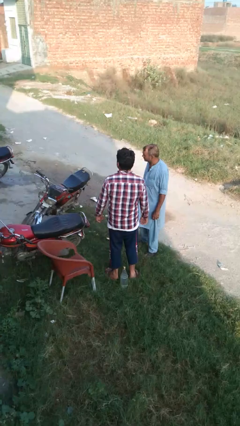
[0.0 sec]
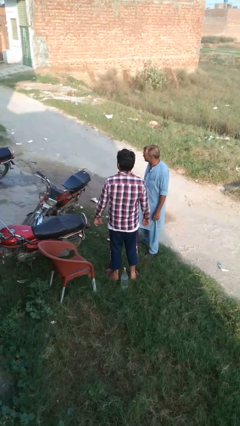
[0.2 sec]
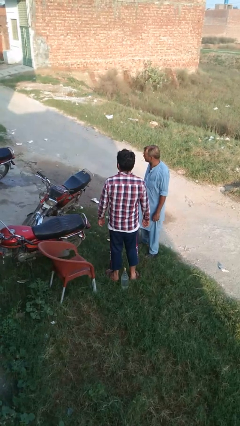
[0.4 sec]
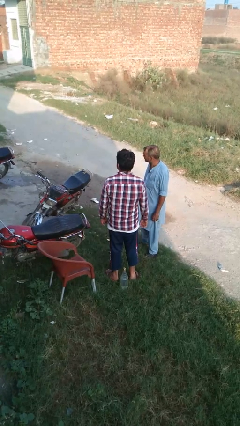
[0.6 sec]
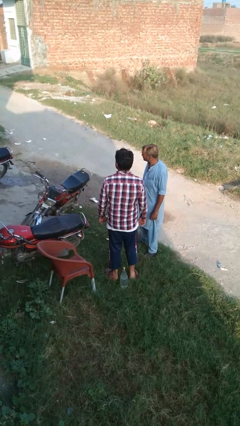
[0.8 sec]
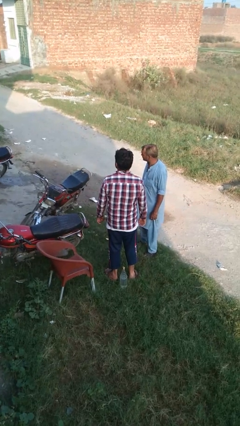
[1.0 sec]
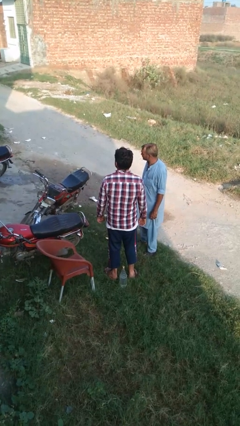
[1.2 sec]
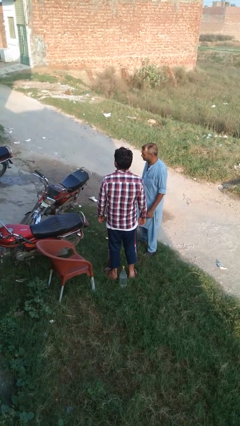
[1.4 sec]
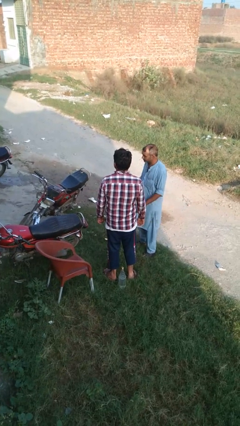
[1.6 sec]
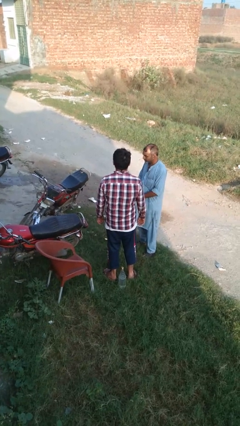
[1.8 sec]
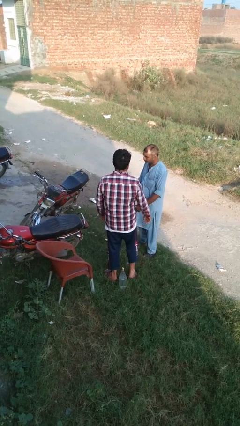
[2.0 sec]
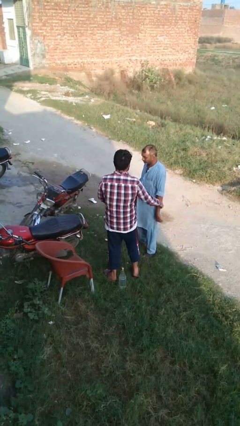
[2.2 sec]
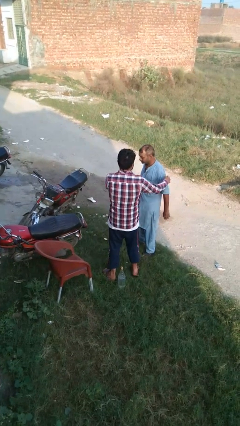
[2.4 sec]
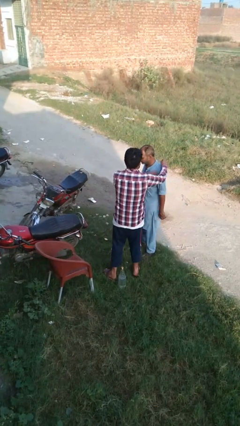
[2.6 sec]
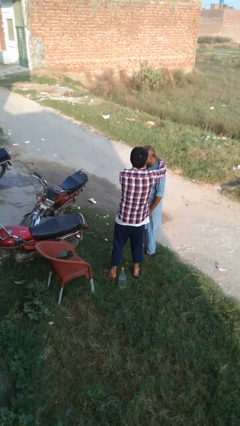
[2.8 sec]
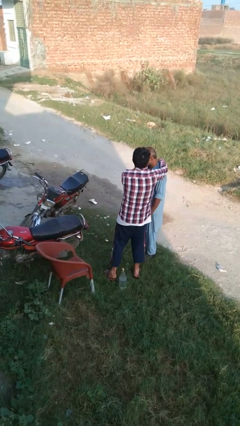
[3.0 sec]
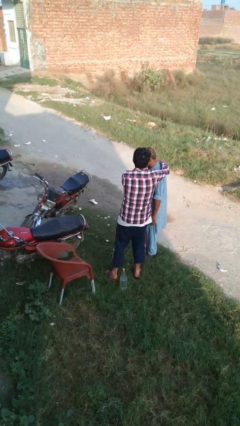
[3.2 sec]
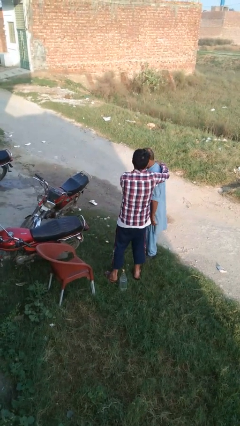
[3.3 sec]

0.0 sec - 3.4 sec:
person grabs person by shoulder

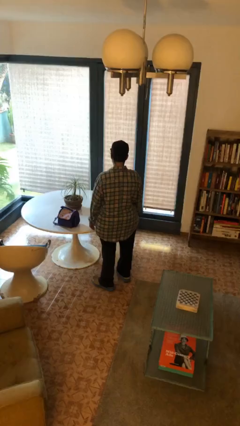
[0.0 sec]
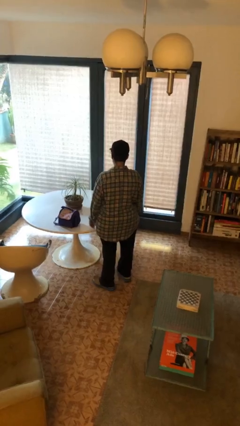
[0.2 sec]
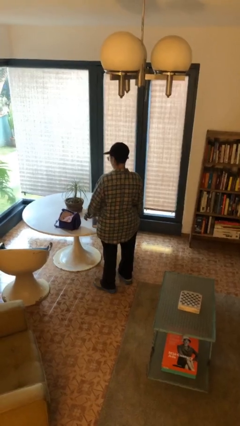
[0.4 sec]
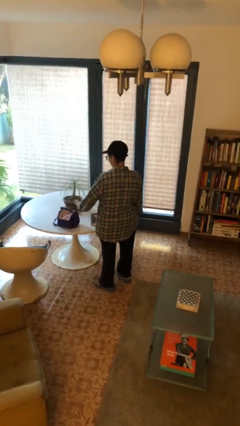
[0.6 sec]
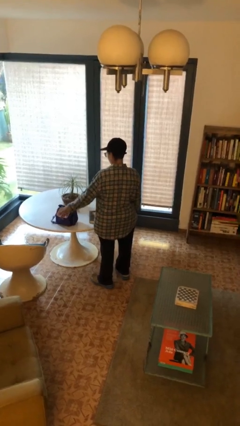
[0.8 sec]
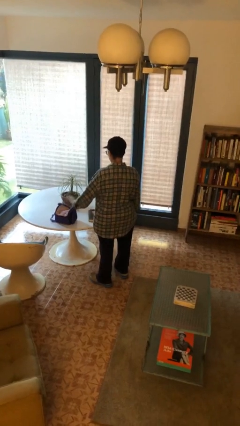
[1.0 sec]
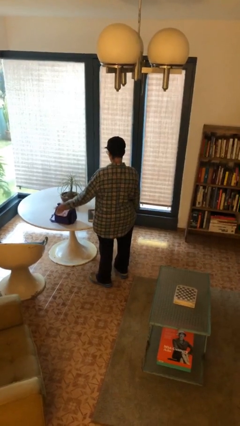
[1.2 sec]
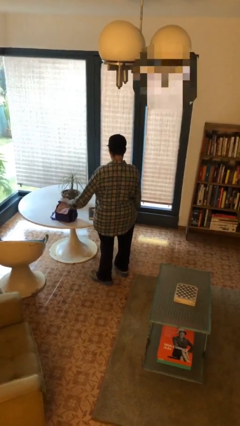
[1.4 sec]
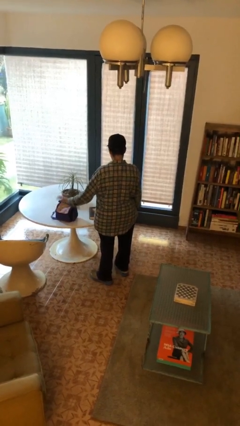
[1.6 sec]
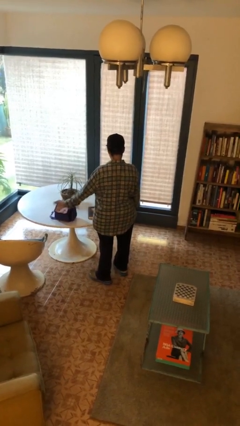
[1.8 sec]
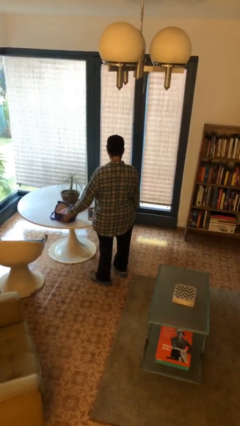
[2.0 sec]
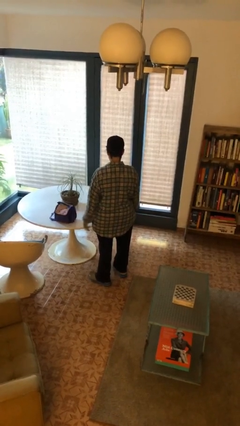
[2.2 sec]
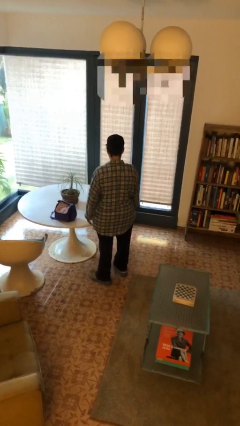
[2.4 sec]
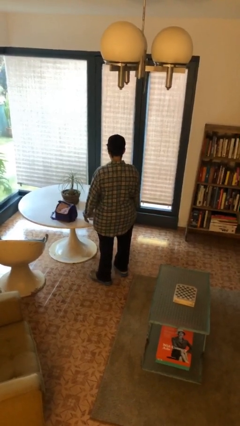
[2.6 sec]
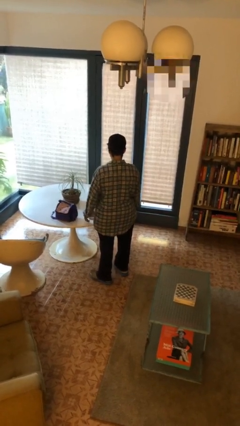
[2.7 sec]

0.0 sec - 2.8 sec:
person waves hand over object

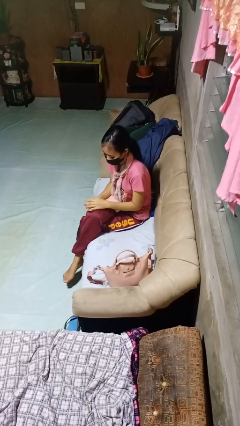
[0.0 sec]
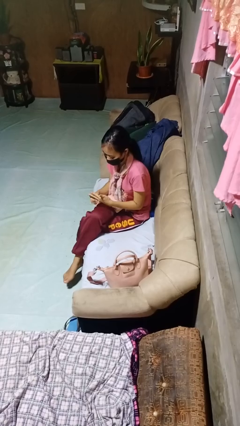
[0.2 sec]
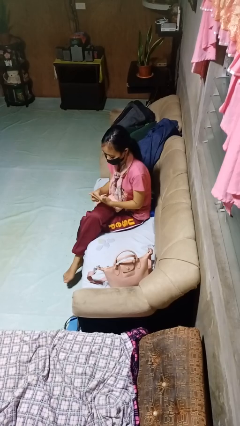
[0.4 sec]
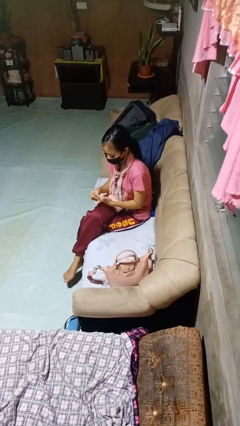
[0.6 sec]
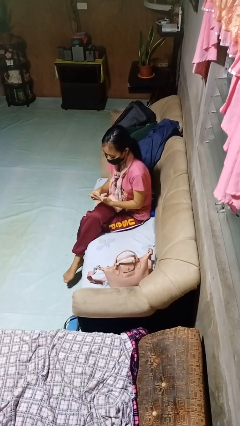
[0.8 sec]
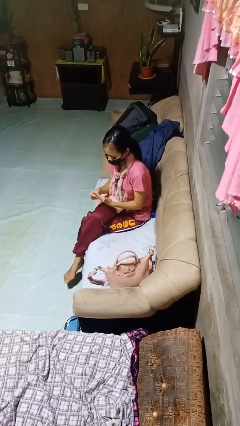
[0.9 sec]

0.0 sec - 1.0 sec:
person takes off ring

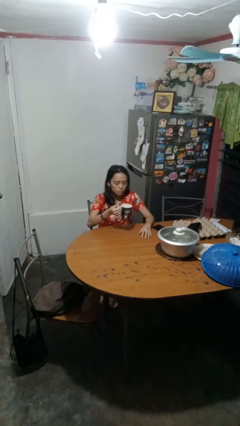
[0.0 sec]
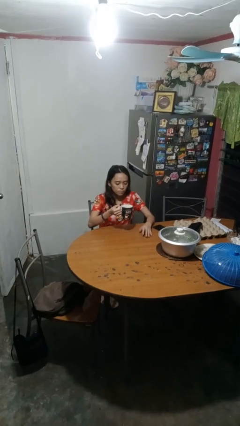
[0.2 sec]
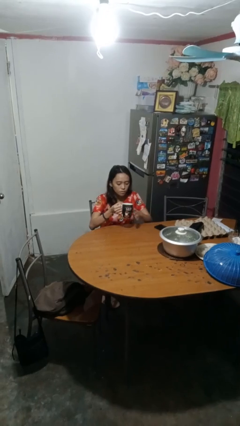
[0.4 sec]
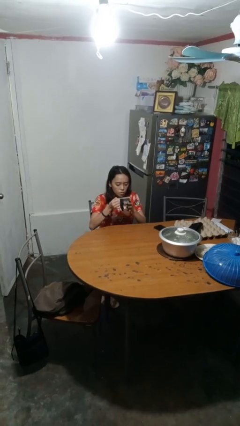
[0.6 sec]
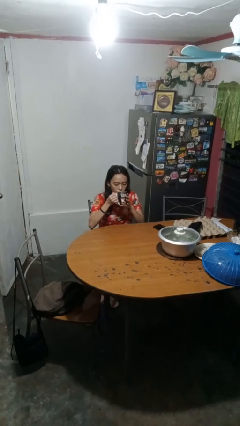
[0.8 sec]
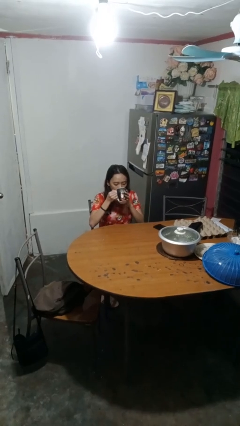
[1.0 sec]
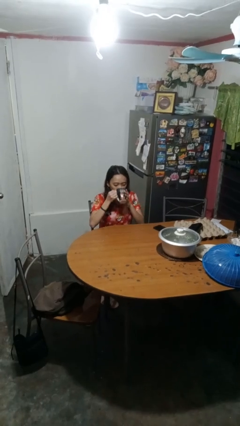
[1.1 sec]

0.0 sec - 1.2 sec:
person drinks from mug

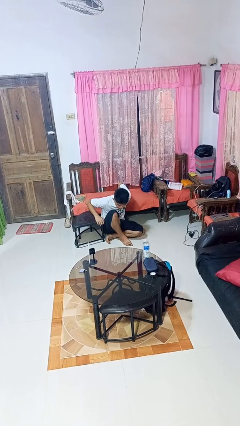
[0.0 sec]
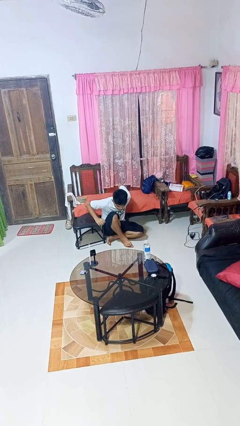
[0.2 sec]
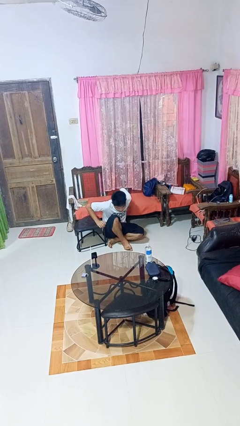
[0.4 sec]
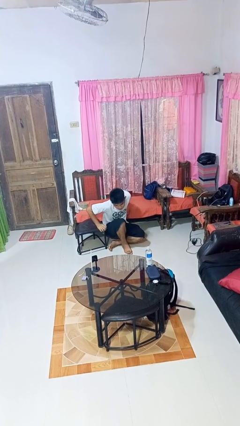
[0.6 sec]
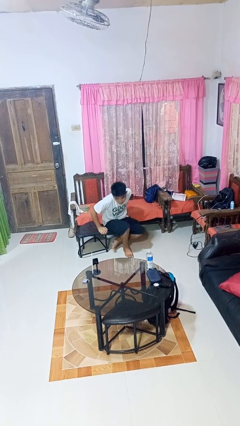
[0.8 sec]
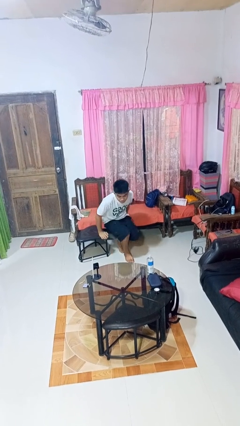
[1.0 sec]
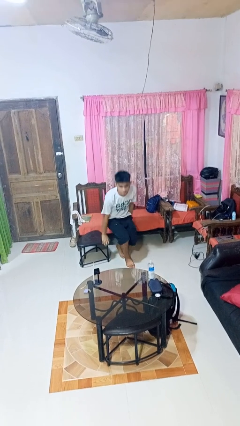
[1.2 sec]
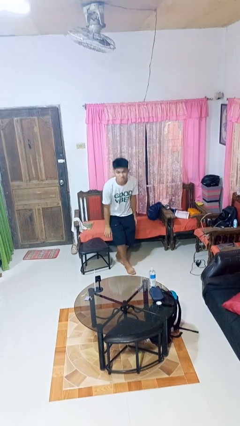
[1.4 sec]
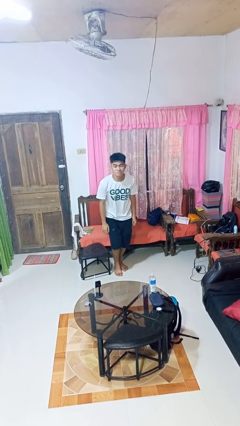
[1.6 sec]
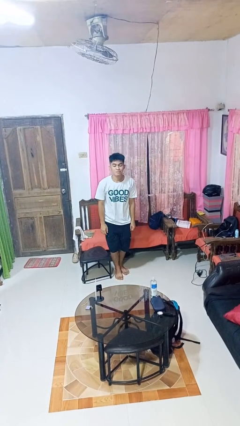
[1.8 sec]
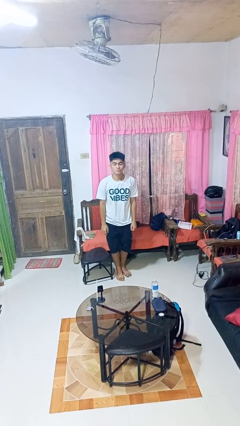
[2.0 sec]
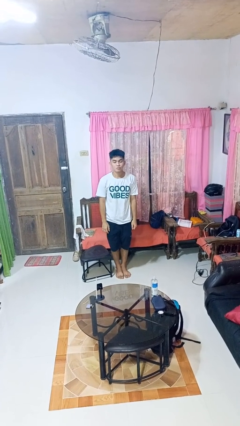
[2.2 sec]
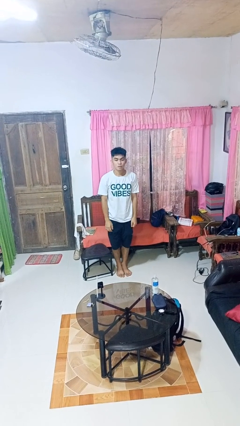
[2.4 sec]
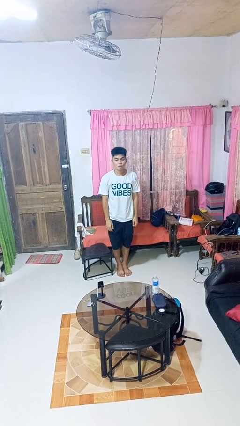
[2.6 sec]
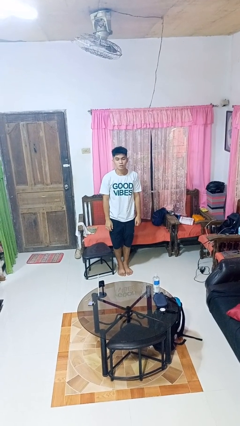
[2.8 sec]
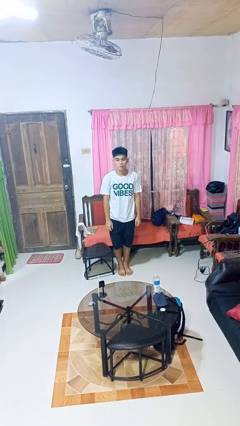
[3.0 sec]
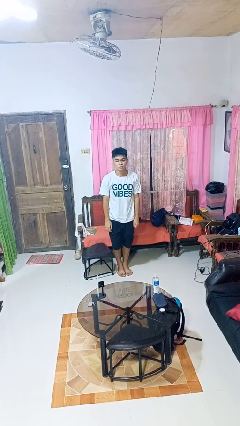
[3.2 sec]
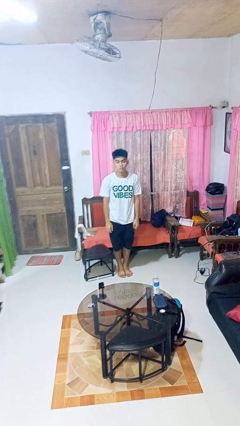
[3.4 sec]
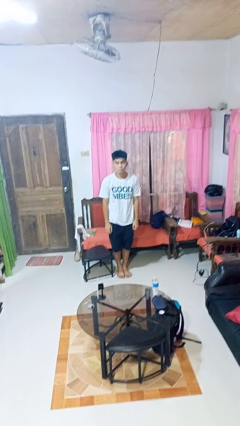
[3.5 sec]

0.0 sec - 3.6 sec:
person stands up from floor

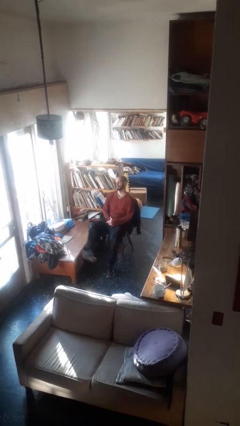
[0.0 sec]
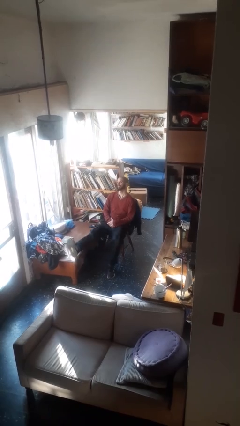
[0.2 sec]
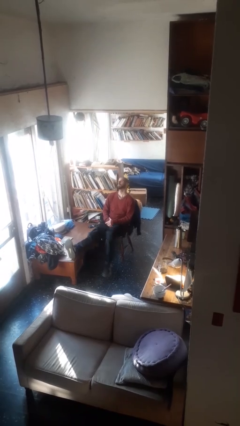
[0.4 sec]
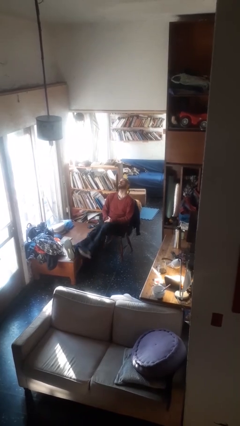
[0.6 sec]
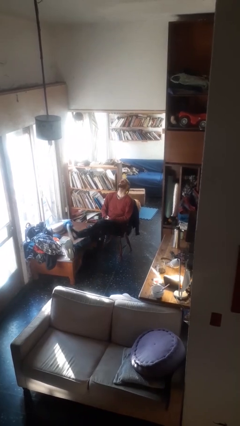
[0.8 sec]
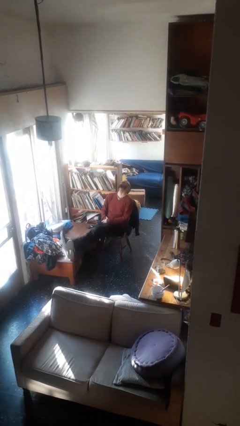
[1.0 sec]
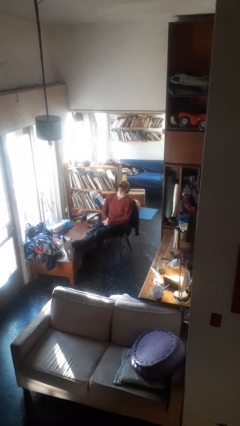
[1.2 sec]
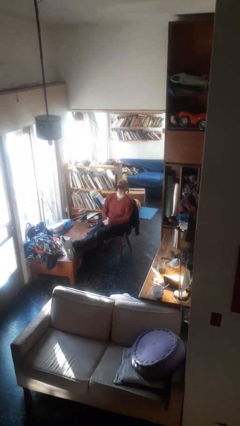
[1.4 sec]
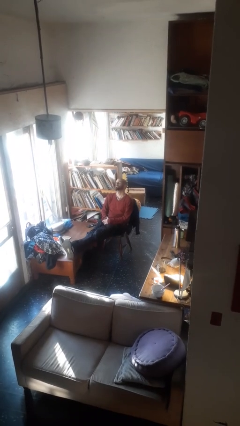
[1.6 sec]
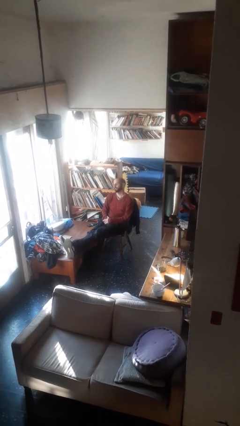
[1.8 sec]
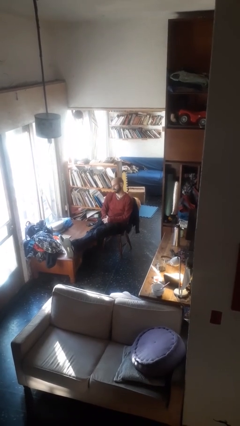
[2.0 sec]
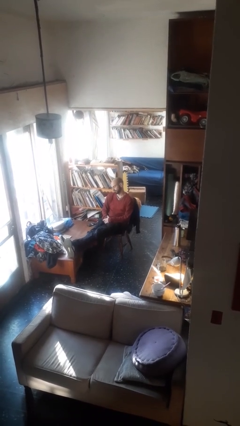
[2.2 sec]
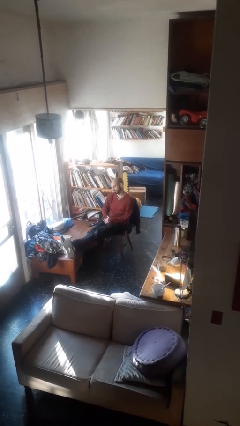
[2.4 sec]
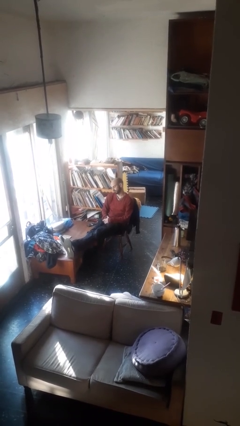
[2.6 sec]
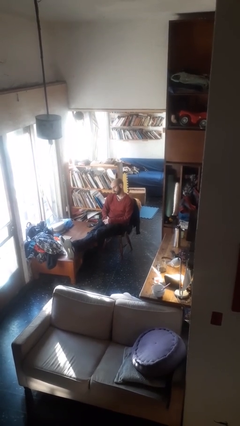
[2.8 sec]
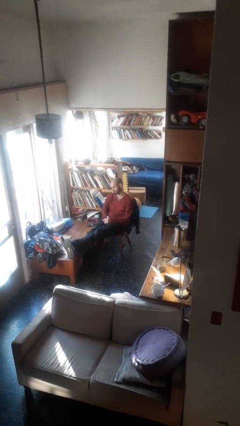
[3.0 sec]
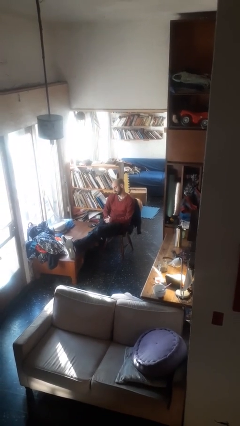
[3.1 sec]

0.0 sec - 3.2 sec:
person puts feet up

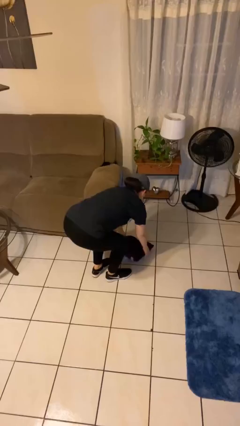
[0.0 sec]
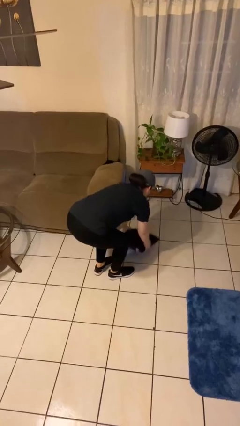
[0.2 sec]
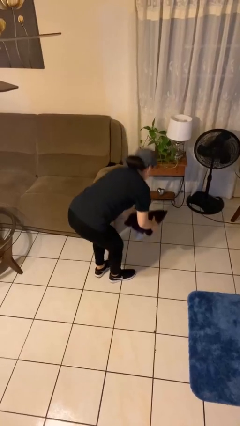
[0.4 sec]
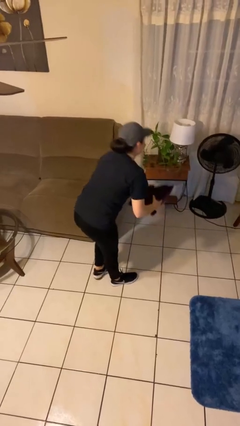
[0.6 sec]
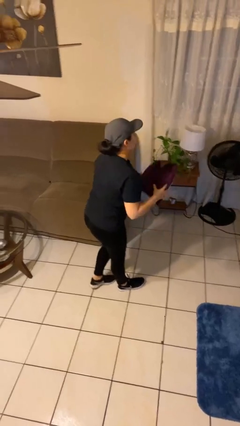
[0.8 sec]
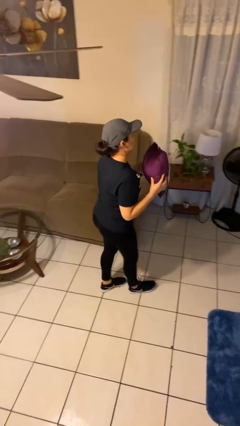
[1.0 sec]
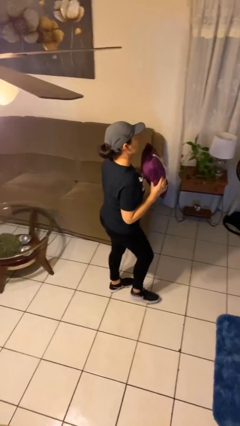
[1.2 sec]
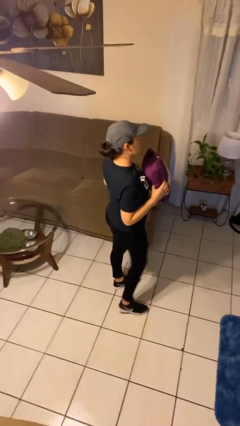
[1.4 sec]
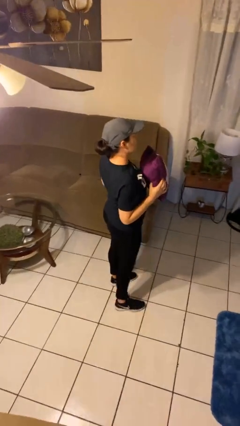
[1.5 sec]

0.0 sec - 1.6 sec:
person picks up object from floor

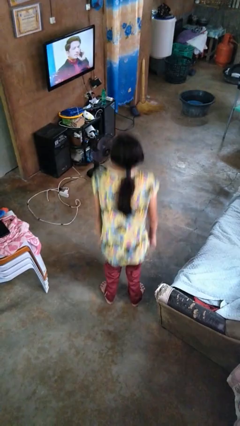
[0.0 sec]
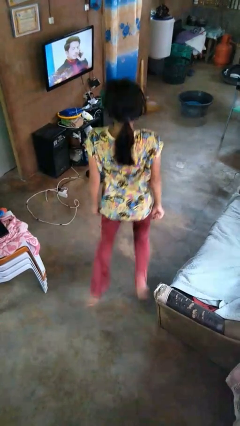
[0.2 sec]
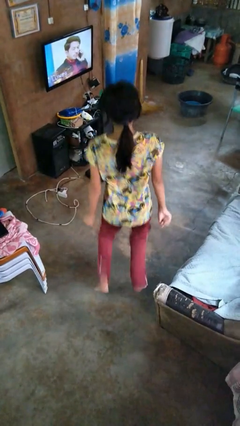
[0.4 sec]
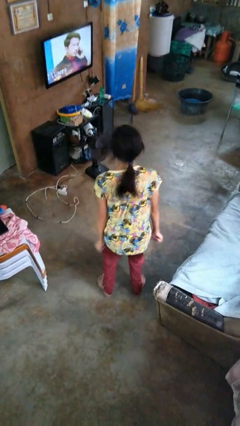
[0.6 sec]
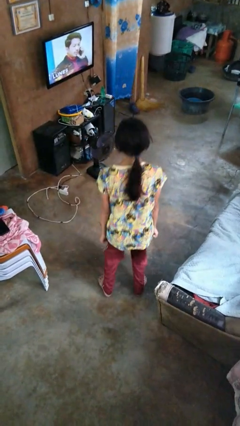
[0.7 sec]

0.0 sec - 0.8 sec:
person jumps
